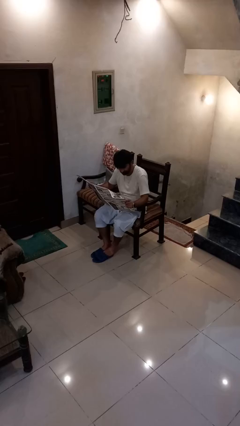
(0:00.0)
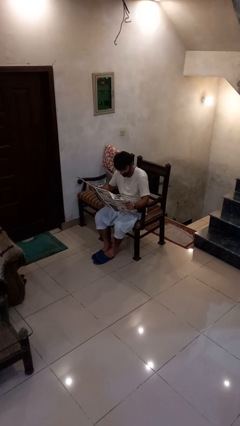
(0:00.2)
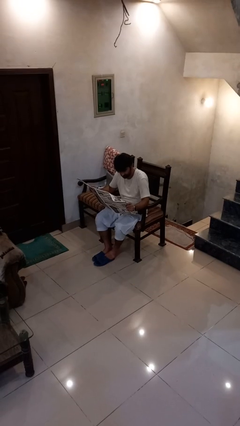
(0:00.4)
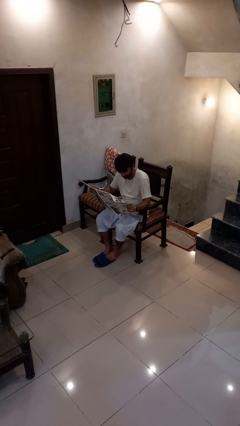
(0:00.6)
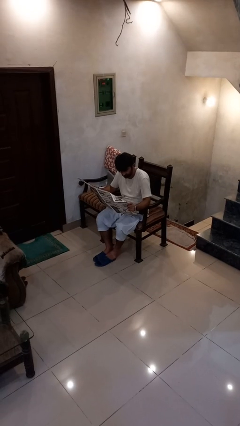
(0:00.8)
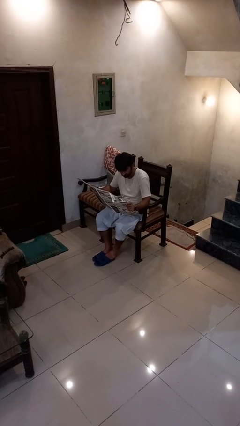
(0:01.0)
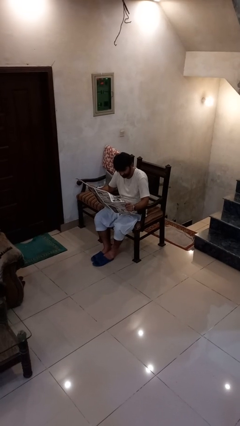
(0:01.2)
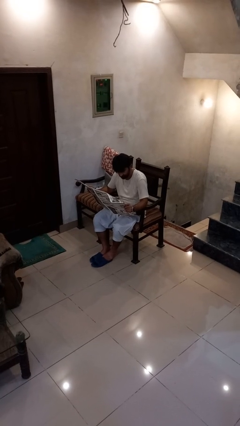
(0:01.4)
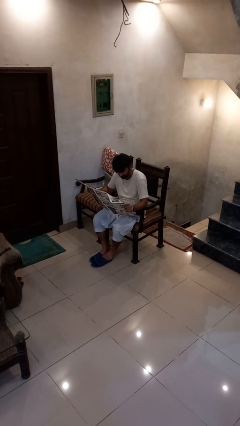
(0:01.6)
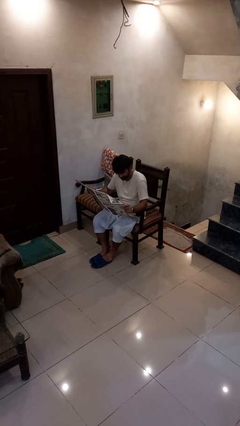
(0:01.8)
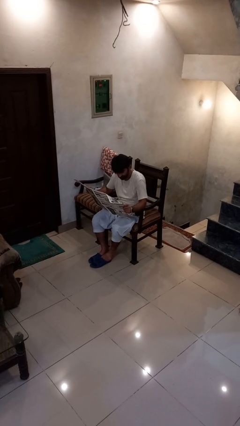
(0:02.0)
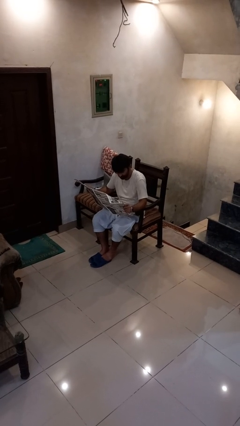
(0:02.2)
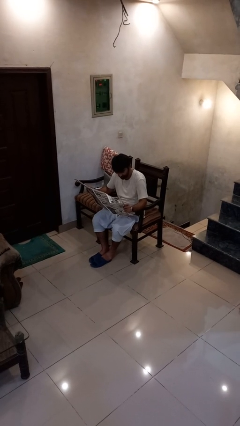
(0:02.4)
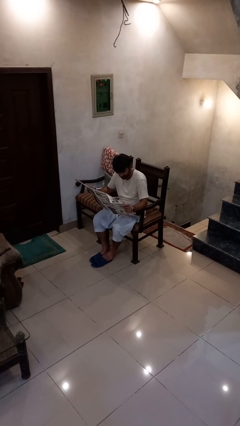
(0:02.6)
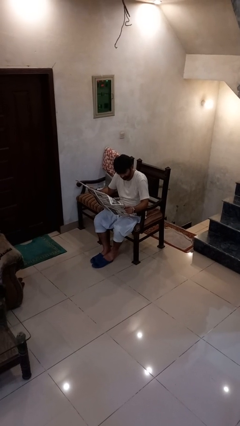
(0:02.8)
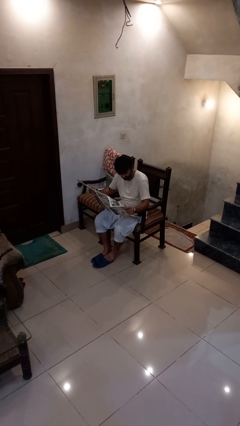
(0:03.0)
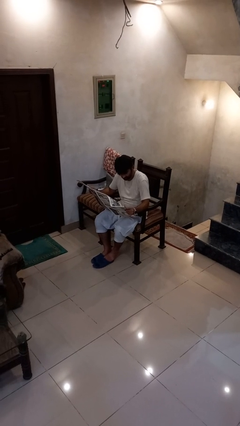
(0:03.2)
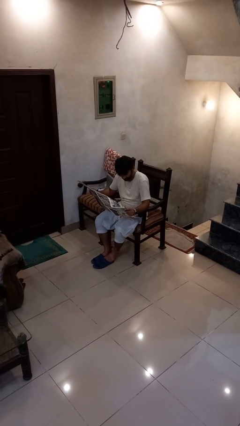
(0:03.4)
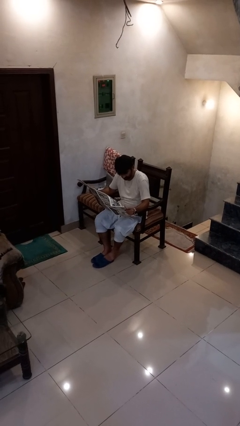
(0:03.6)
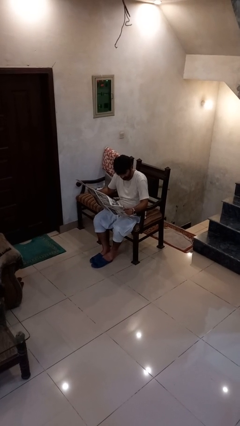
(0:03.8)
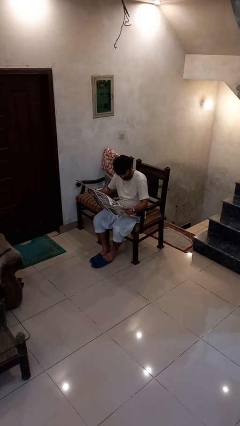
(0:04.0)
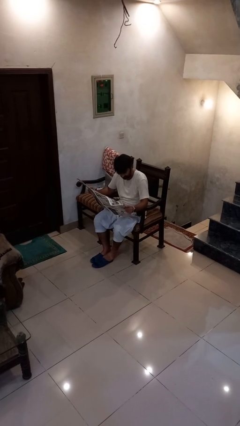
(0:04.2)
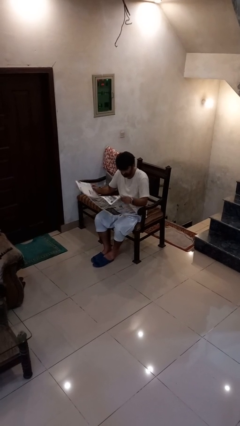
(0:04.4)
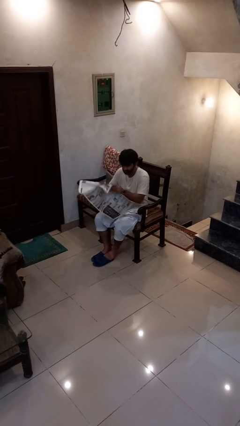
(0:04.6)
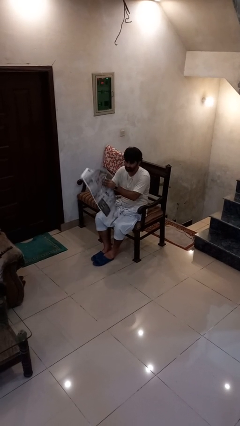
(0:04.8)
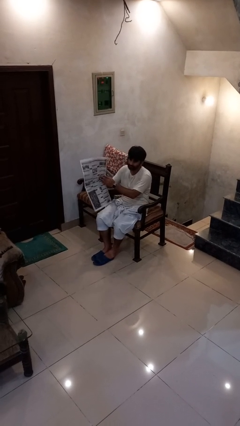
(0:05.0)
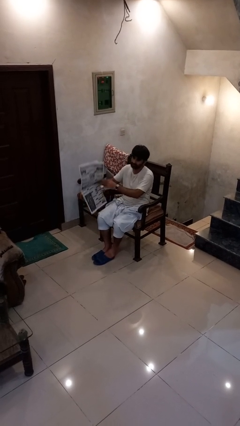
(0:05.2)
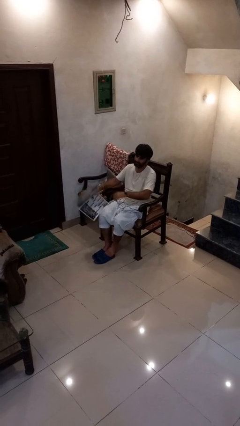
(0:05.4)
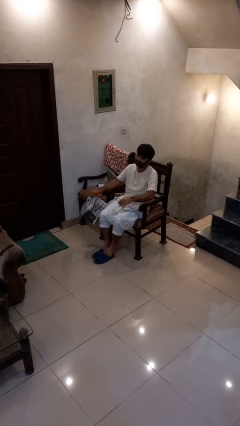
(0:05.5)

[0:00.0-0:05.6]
person reads newspaper

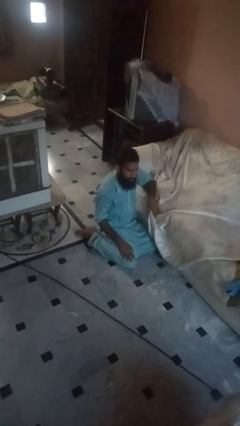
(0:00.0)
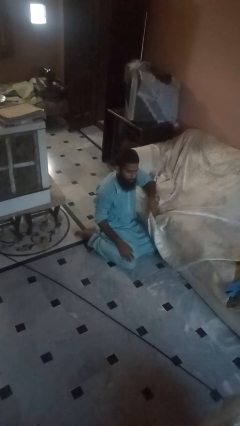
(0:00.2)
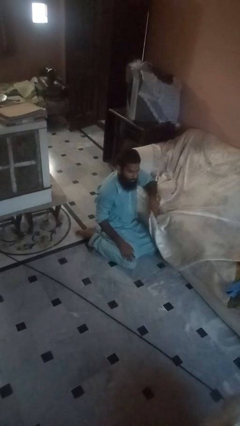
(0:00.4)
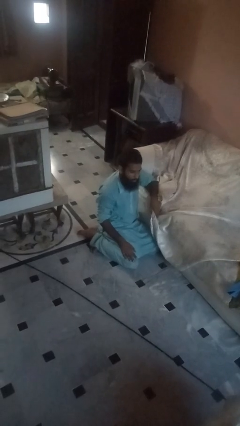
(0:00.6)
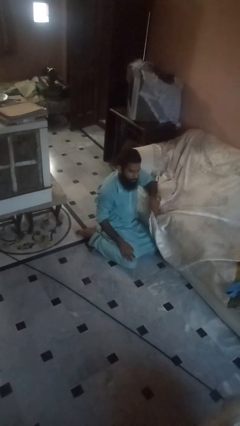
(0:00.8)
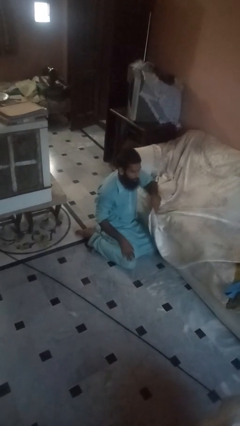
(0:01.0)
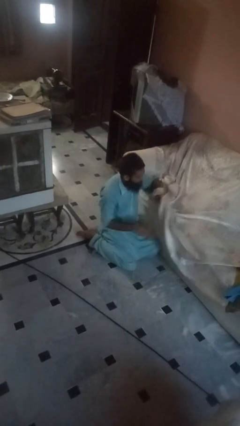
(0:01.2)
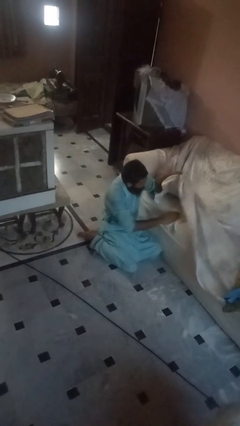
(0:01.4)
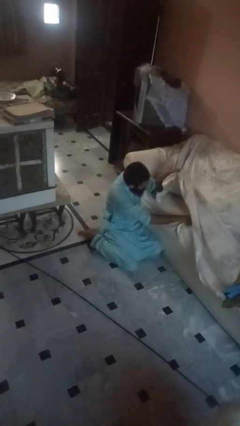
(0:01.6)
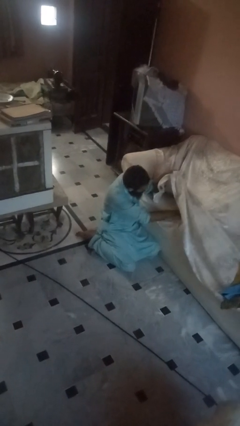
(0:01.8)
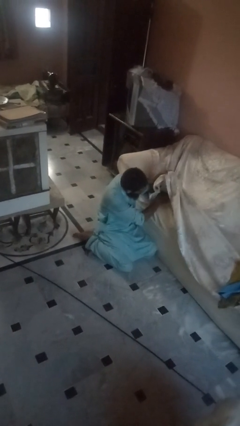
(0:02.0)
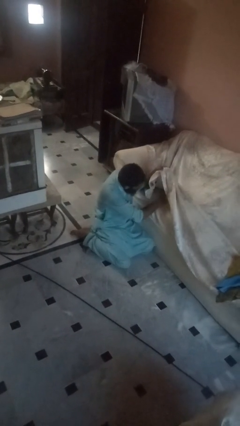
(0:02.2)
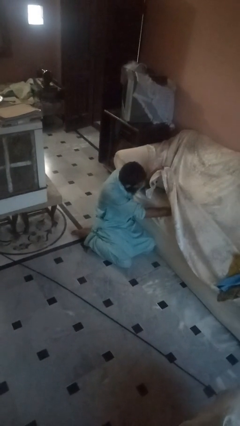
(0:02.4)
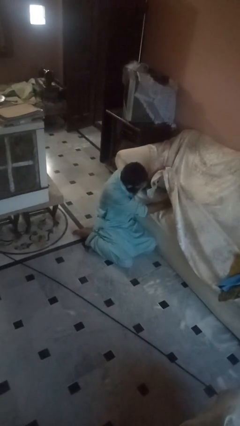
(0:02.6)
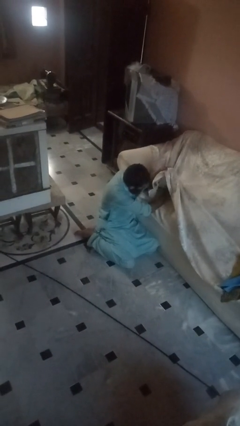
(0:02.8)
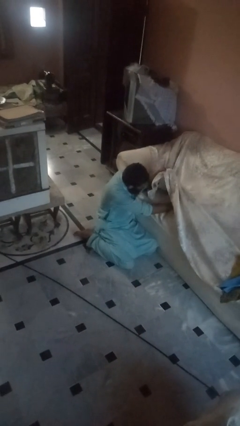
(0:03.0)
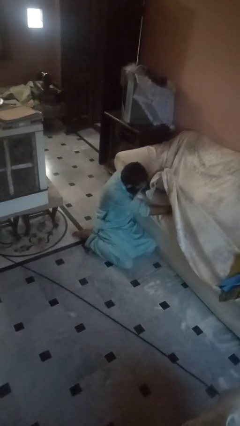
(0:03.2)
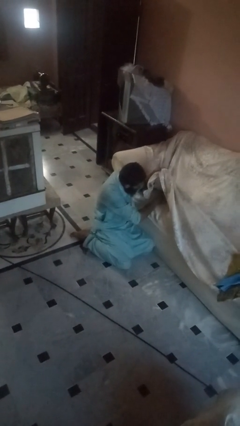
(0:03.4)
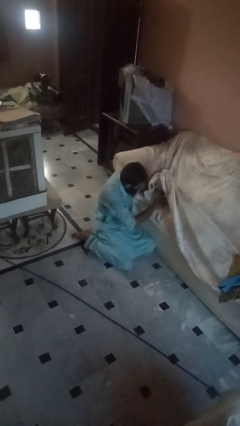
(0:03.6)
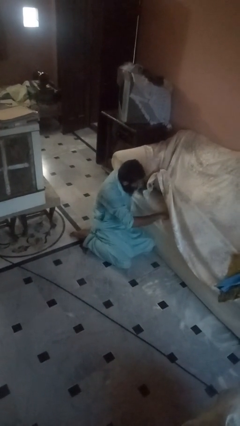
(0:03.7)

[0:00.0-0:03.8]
person searches under couch

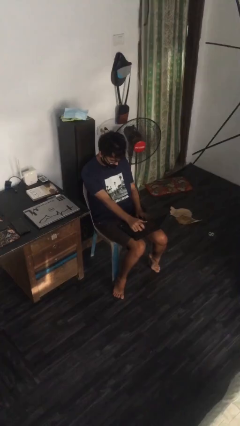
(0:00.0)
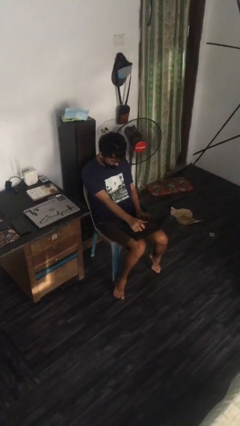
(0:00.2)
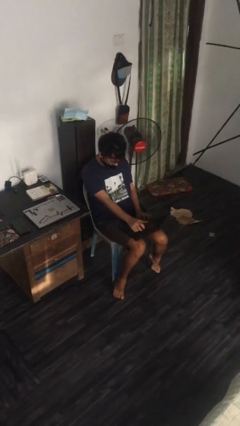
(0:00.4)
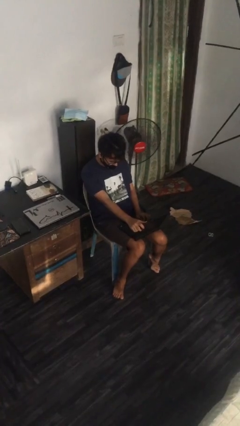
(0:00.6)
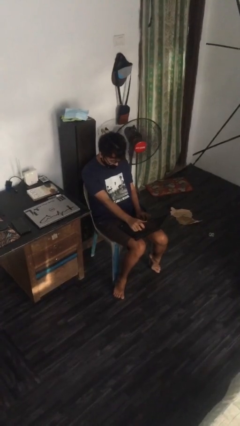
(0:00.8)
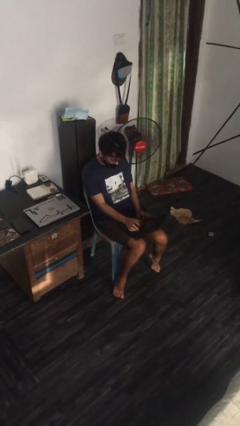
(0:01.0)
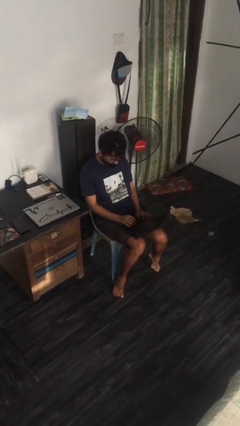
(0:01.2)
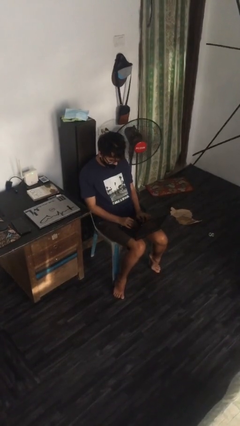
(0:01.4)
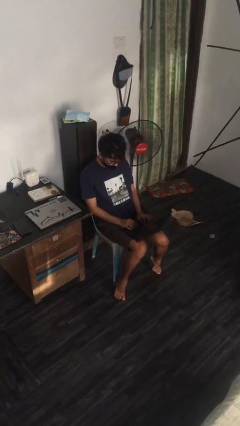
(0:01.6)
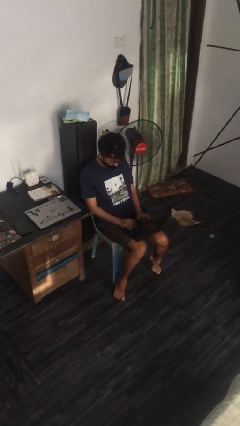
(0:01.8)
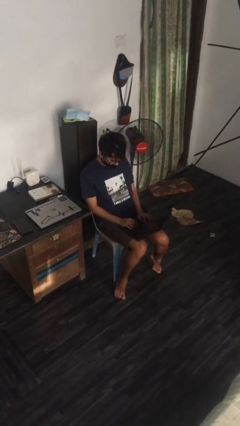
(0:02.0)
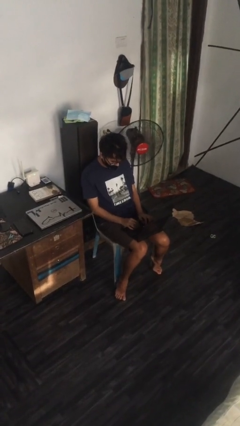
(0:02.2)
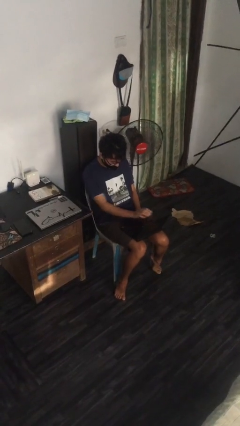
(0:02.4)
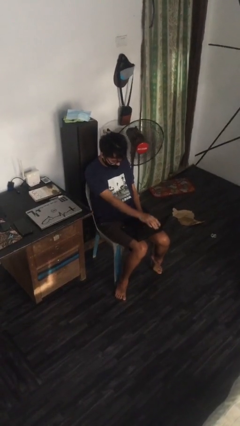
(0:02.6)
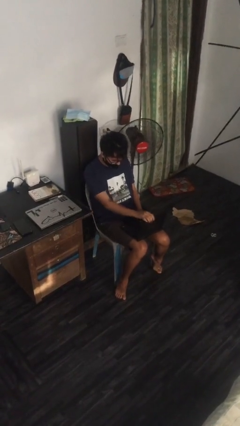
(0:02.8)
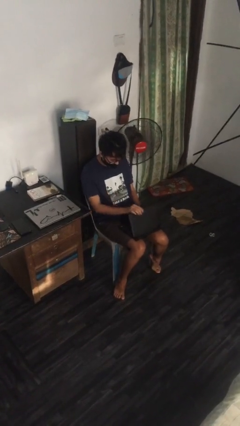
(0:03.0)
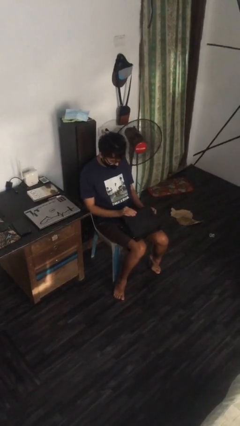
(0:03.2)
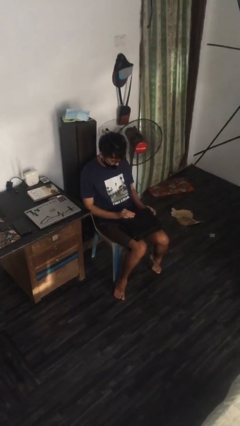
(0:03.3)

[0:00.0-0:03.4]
person interacts with laptop

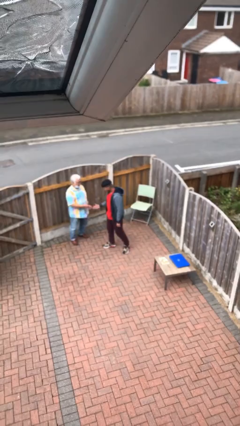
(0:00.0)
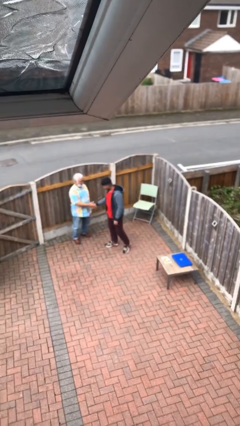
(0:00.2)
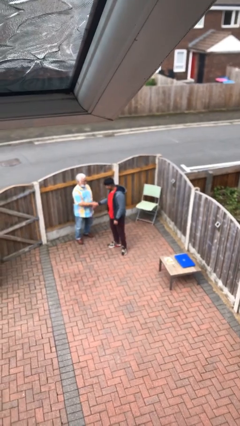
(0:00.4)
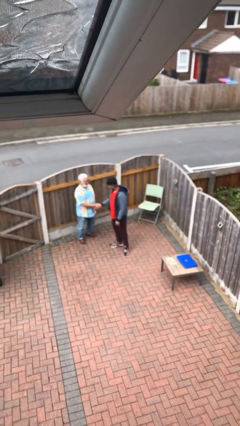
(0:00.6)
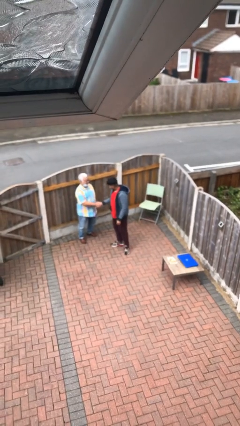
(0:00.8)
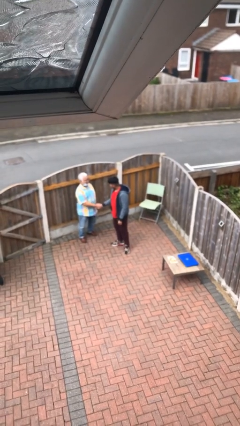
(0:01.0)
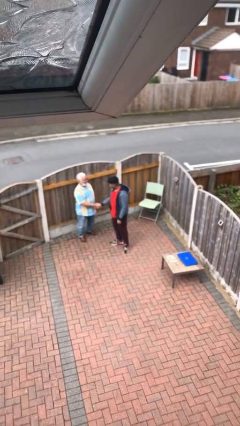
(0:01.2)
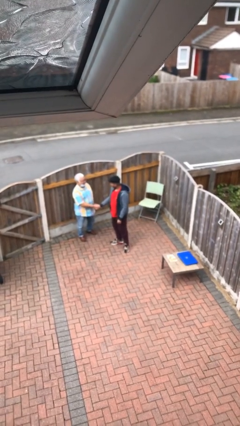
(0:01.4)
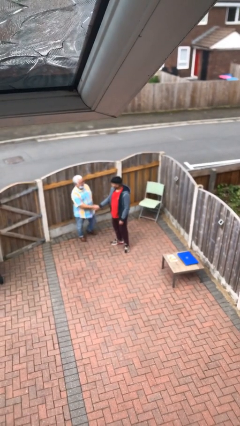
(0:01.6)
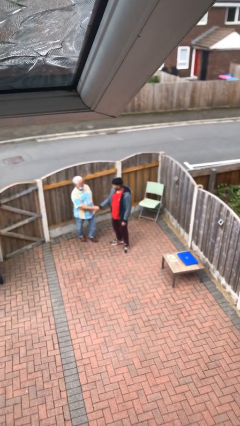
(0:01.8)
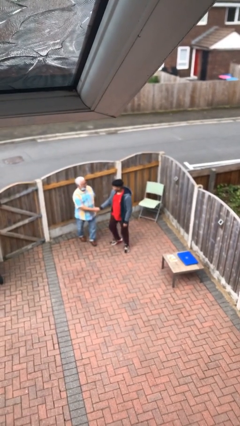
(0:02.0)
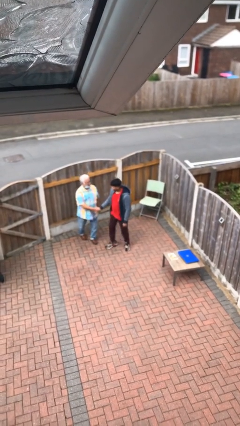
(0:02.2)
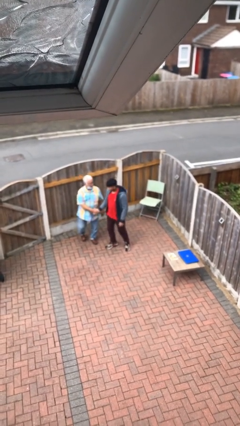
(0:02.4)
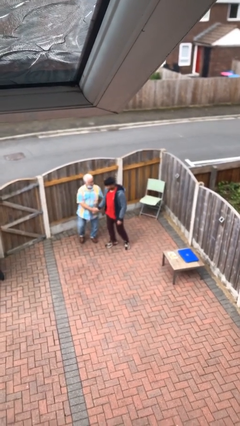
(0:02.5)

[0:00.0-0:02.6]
person shakes hand

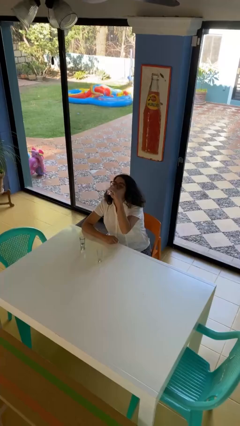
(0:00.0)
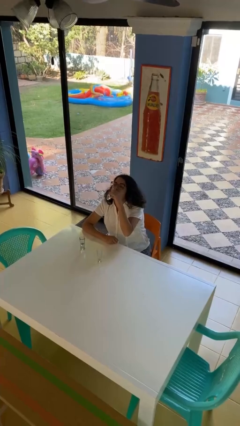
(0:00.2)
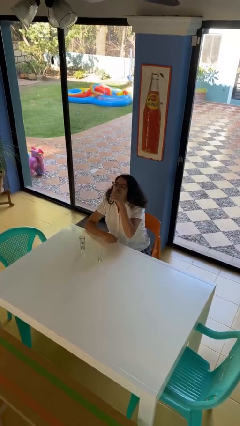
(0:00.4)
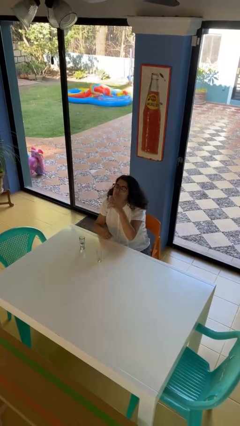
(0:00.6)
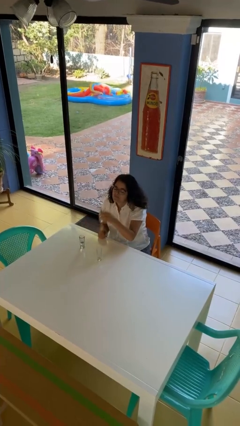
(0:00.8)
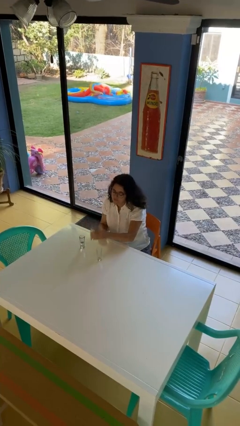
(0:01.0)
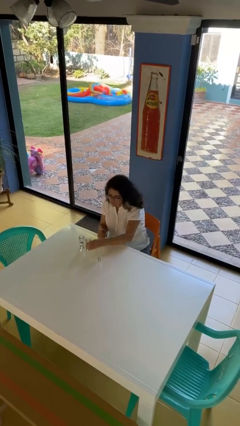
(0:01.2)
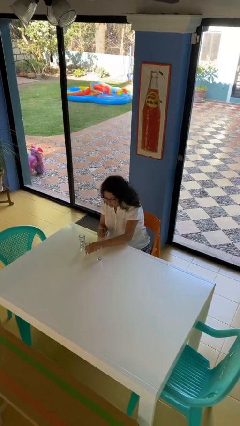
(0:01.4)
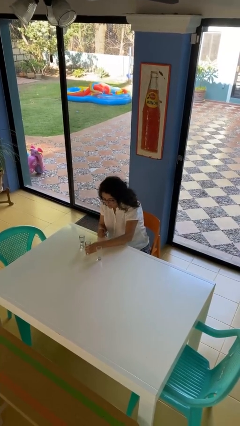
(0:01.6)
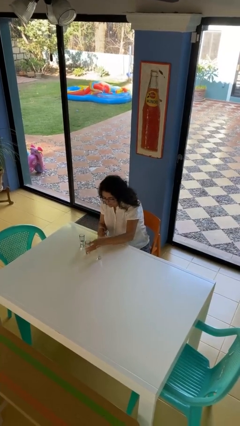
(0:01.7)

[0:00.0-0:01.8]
person puts down object on table

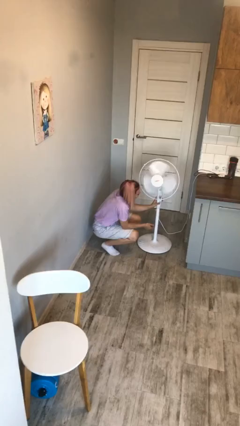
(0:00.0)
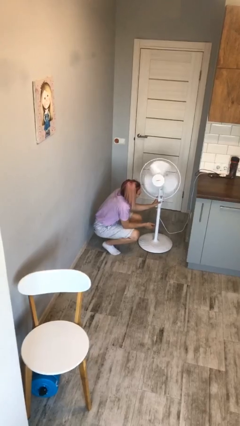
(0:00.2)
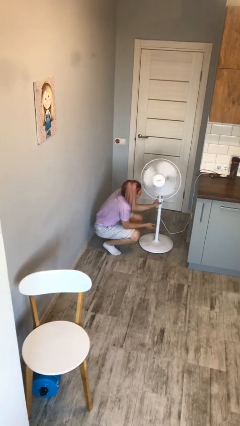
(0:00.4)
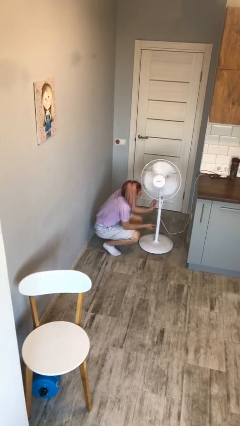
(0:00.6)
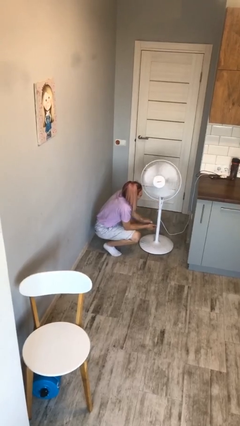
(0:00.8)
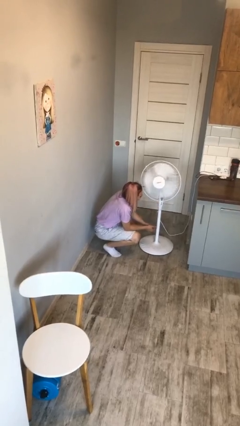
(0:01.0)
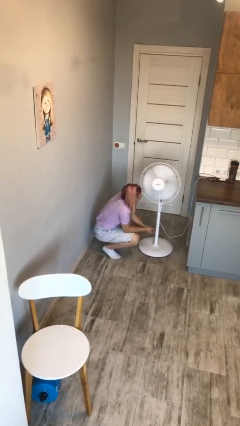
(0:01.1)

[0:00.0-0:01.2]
person turns on fan
